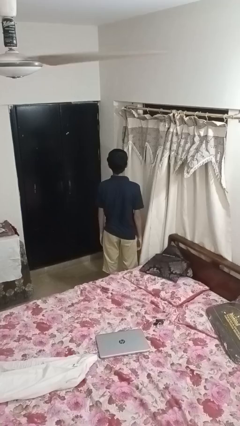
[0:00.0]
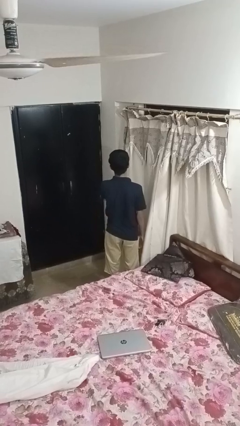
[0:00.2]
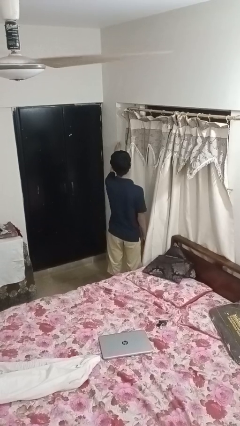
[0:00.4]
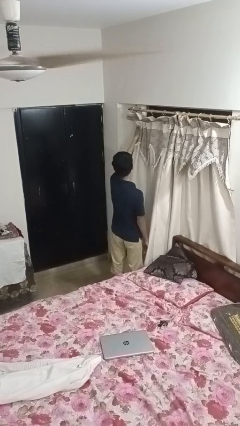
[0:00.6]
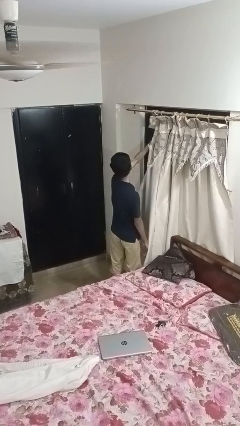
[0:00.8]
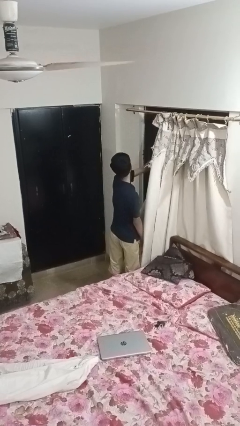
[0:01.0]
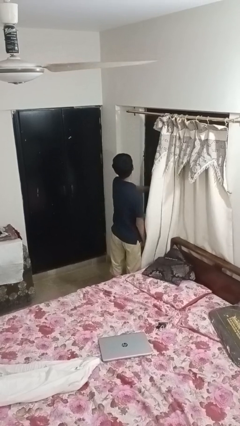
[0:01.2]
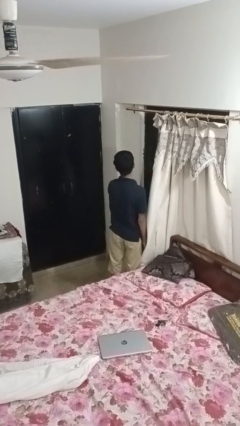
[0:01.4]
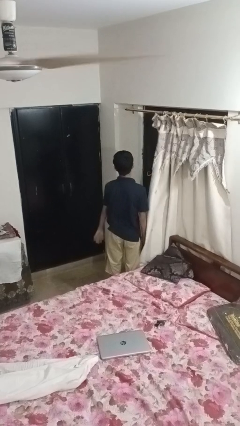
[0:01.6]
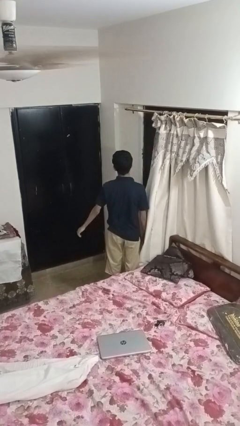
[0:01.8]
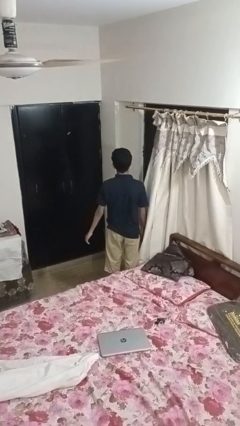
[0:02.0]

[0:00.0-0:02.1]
person opens curtains

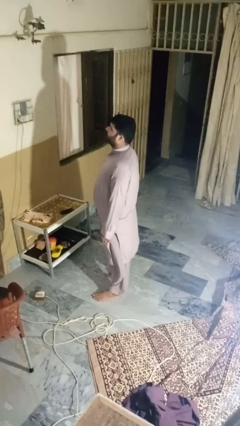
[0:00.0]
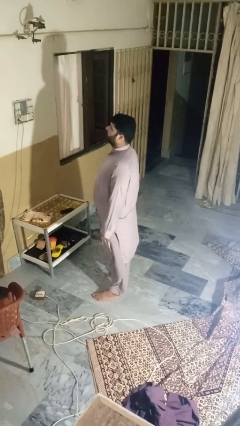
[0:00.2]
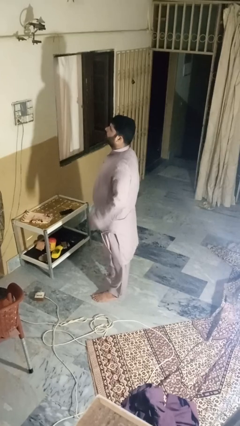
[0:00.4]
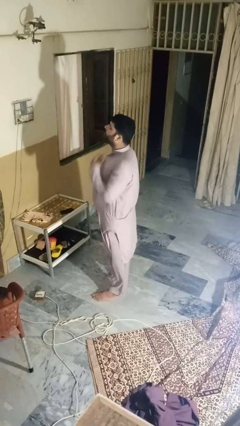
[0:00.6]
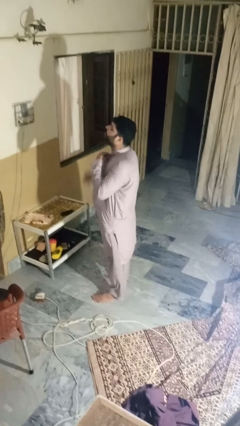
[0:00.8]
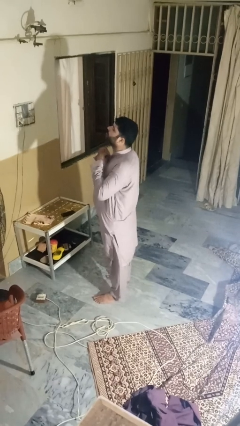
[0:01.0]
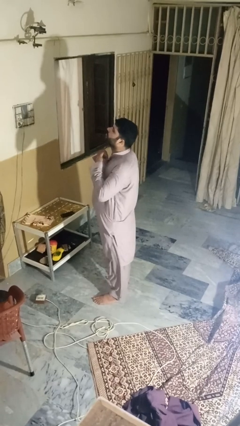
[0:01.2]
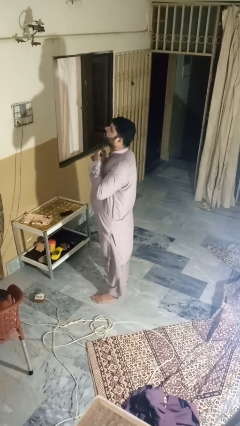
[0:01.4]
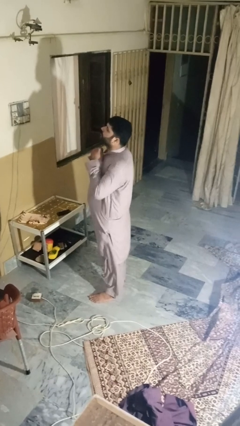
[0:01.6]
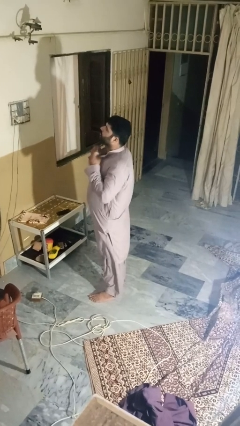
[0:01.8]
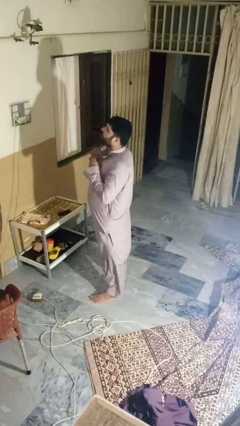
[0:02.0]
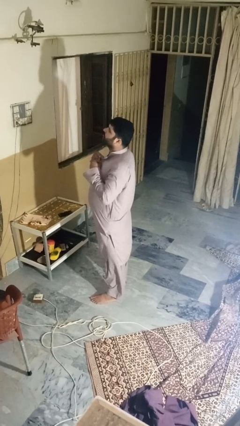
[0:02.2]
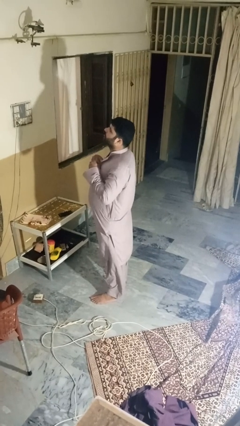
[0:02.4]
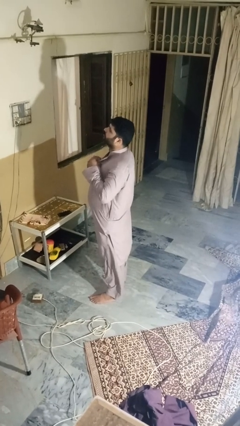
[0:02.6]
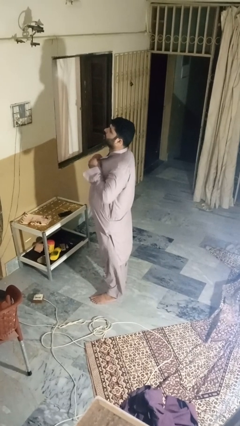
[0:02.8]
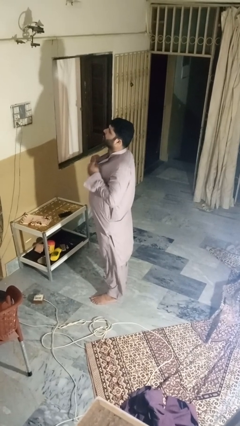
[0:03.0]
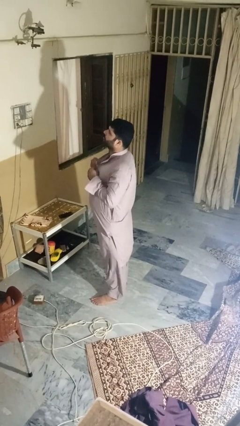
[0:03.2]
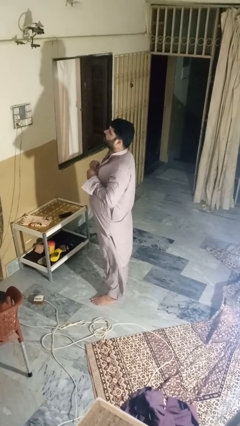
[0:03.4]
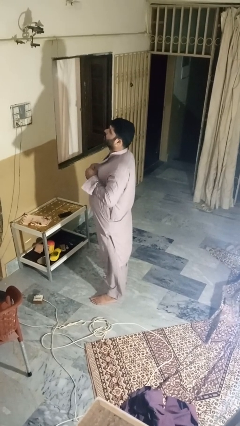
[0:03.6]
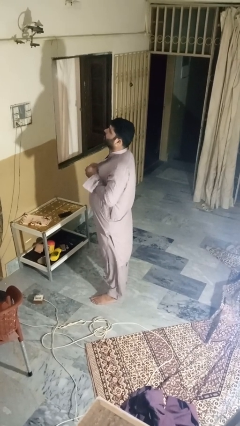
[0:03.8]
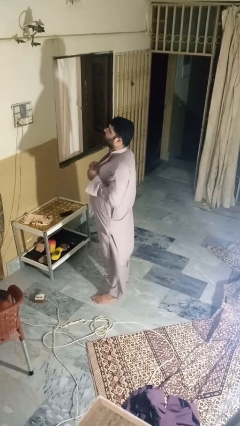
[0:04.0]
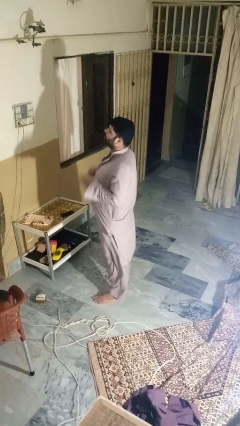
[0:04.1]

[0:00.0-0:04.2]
person unbuttons shirt

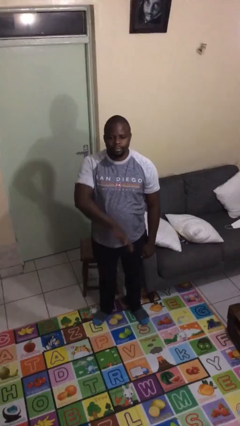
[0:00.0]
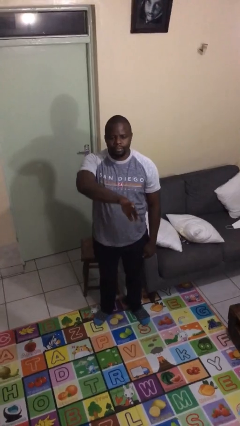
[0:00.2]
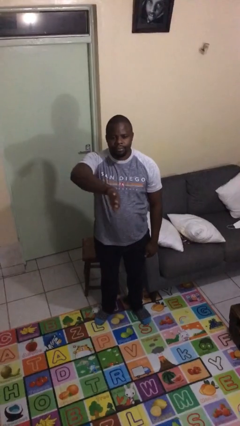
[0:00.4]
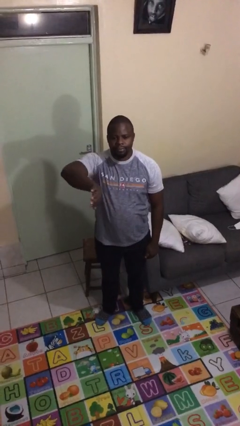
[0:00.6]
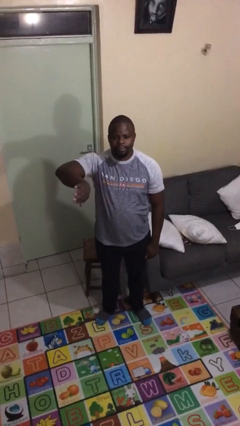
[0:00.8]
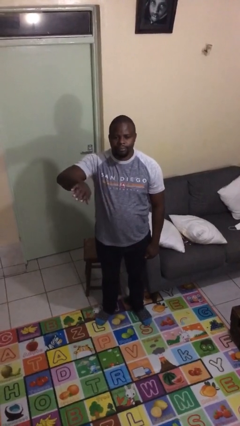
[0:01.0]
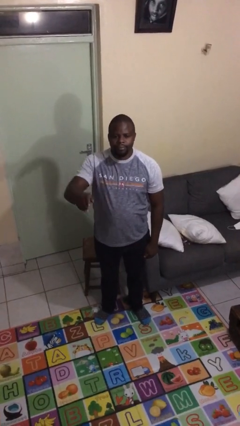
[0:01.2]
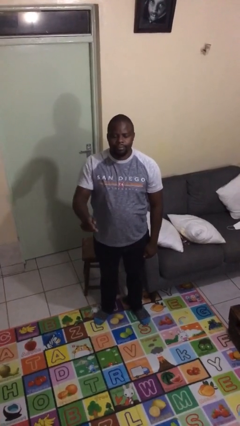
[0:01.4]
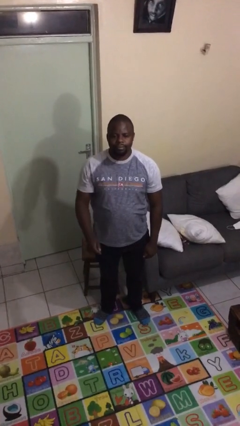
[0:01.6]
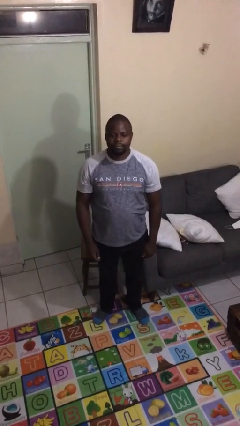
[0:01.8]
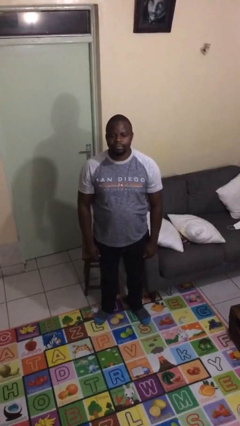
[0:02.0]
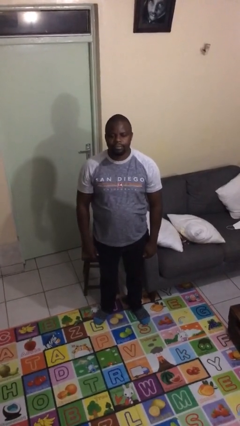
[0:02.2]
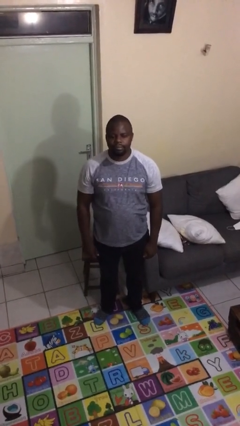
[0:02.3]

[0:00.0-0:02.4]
person gestures swipe right

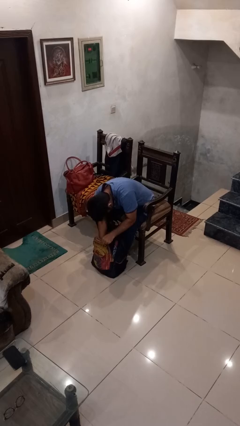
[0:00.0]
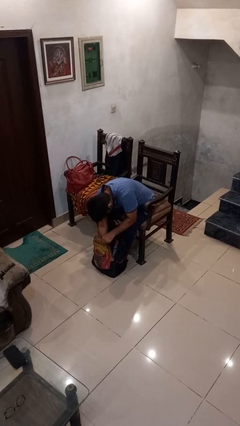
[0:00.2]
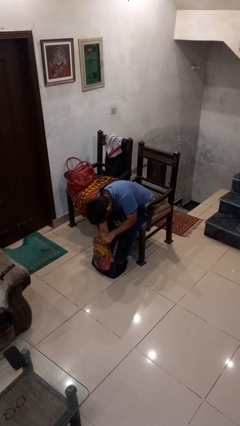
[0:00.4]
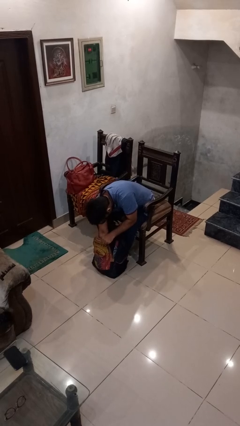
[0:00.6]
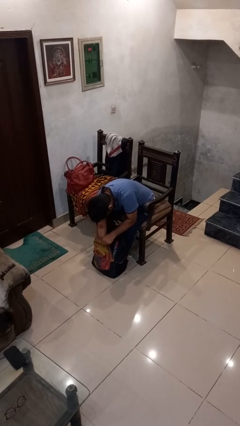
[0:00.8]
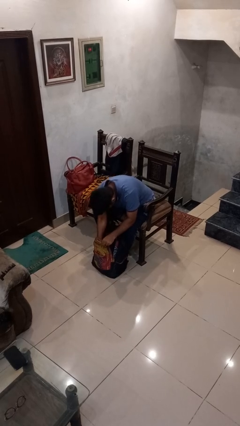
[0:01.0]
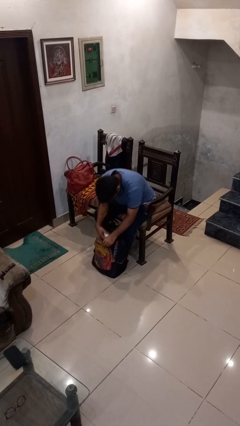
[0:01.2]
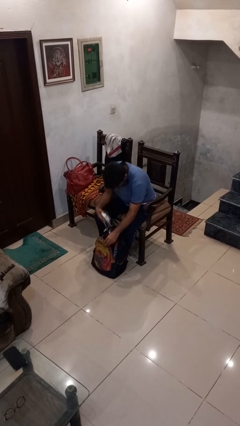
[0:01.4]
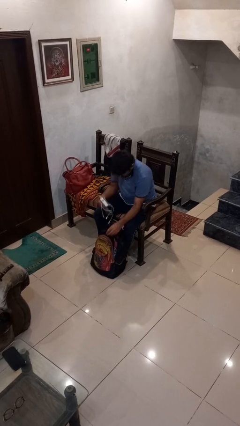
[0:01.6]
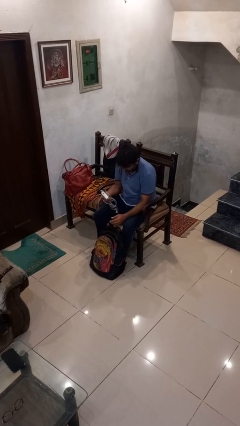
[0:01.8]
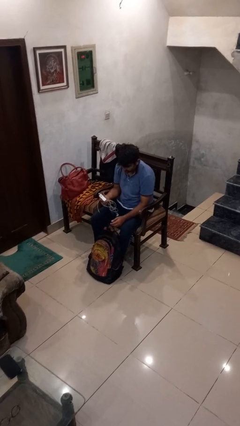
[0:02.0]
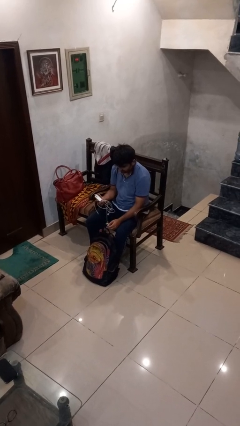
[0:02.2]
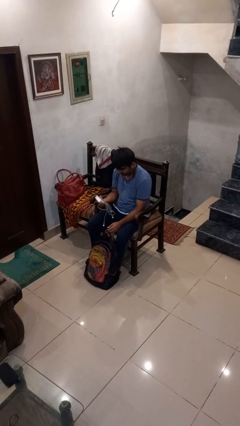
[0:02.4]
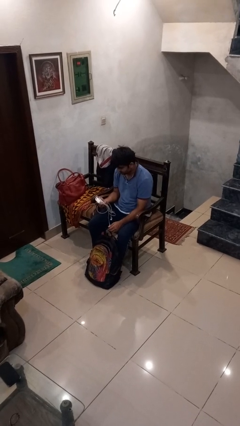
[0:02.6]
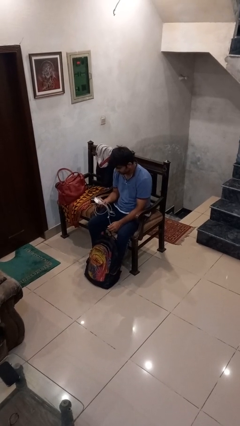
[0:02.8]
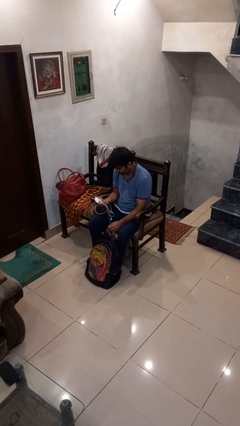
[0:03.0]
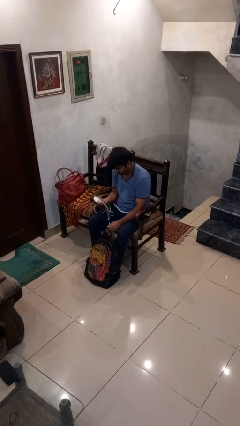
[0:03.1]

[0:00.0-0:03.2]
person takes object from backpack

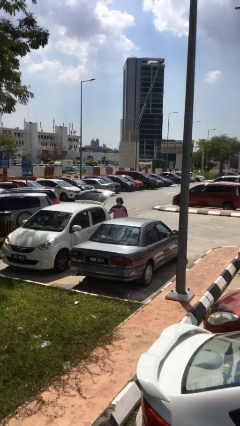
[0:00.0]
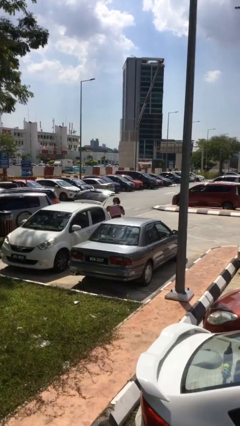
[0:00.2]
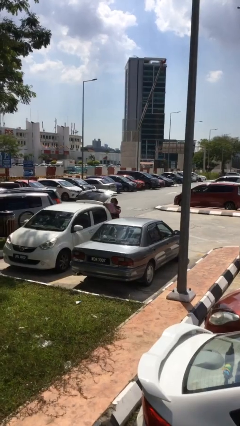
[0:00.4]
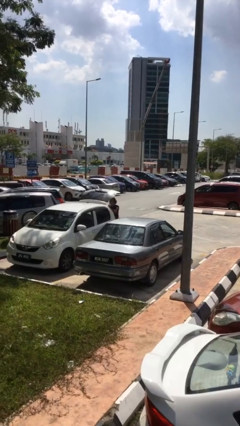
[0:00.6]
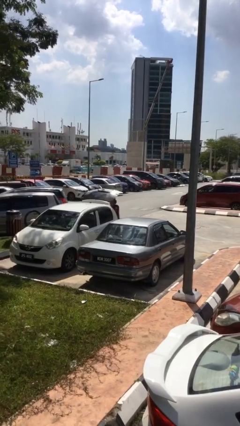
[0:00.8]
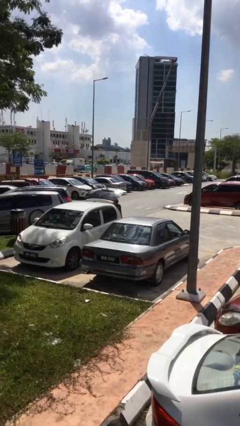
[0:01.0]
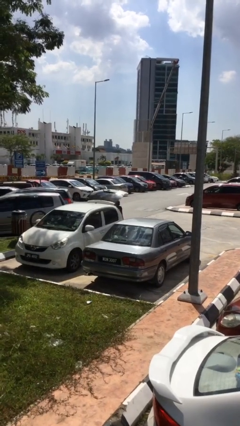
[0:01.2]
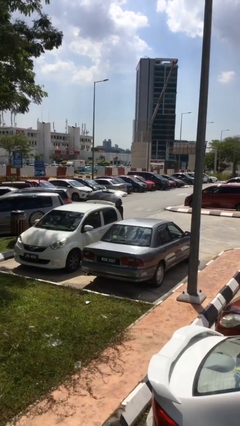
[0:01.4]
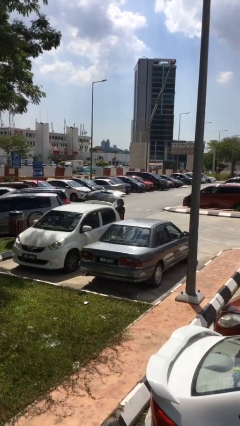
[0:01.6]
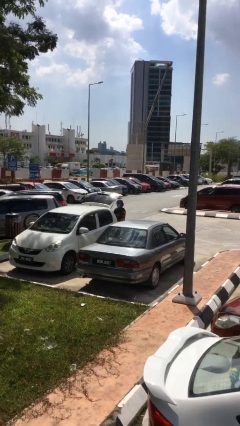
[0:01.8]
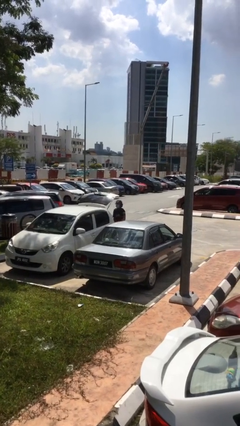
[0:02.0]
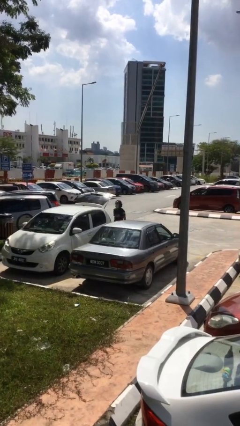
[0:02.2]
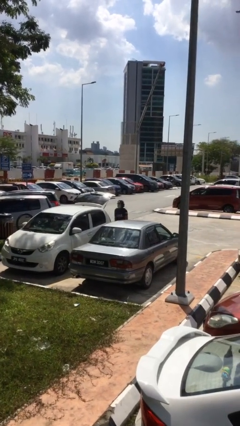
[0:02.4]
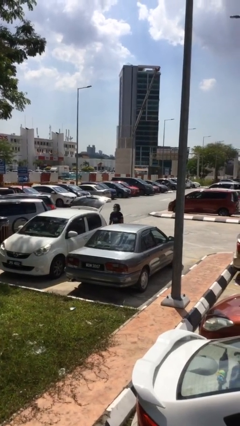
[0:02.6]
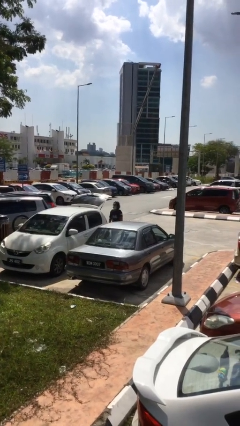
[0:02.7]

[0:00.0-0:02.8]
person loads car

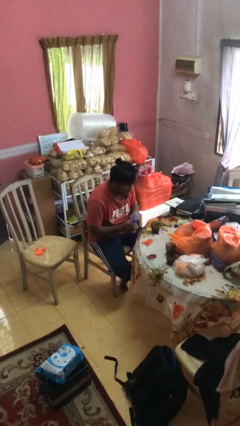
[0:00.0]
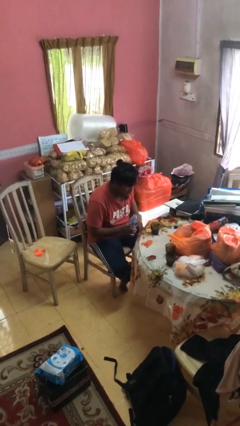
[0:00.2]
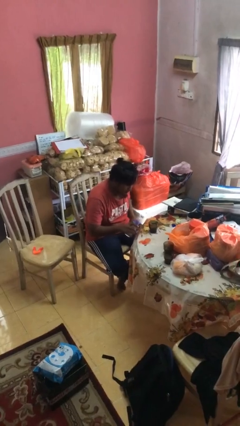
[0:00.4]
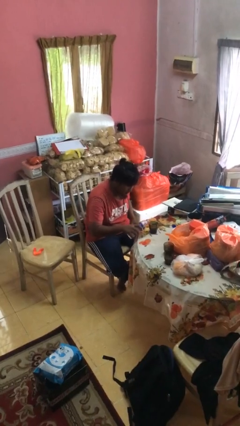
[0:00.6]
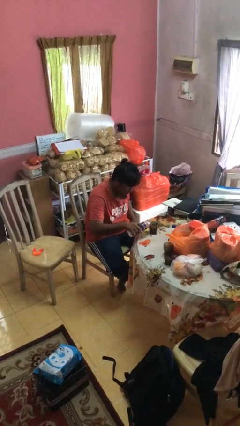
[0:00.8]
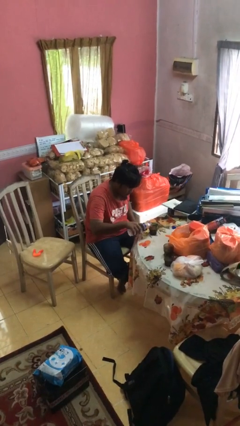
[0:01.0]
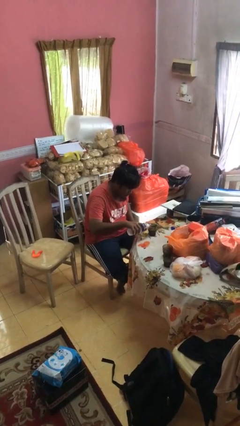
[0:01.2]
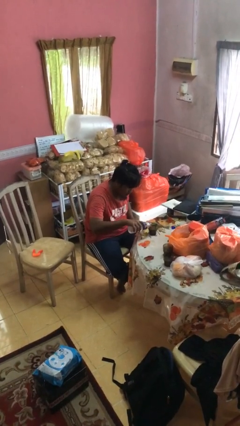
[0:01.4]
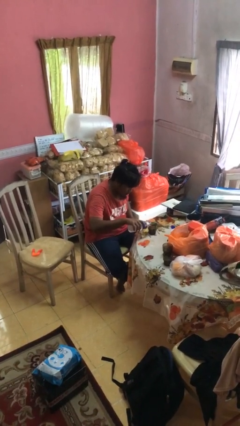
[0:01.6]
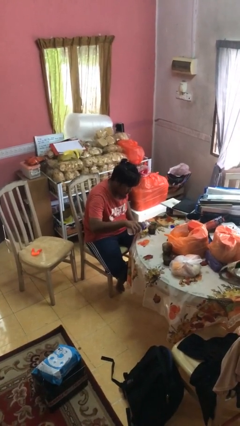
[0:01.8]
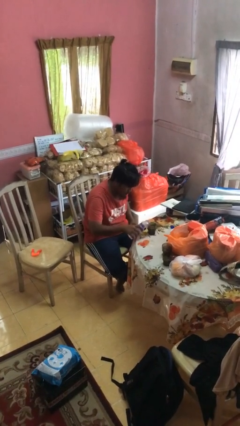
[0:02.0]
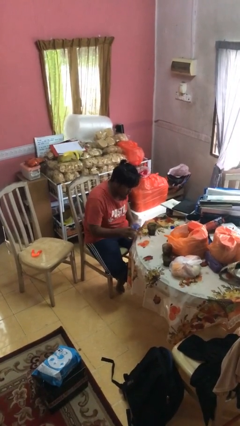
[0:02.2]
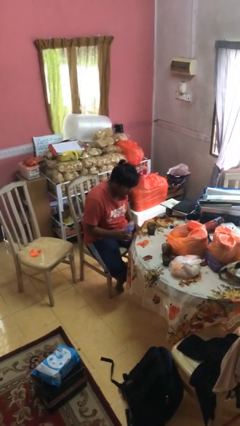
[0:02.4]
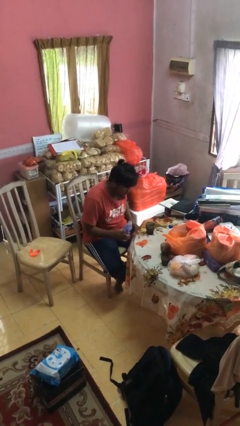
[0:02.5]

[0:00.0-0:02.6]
person pours liquid into cup

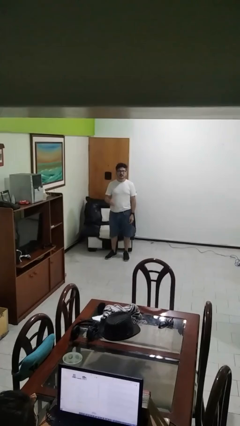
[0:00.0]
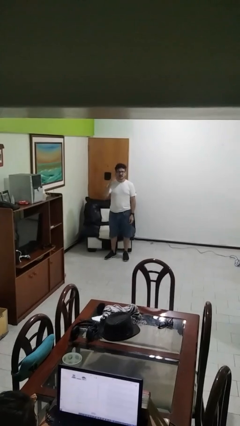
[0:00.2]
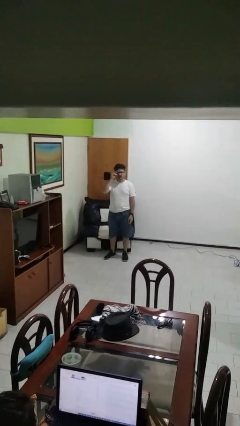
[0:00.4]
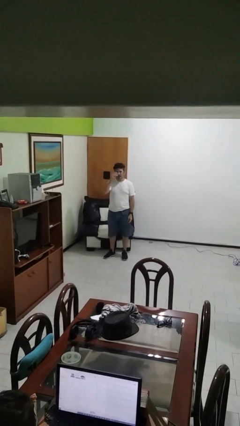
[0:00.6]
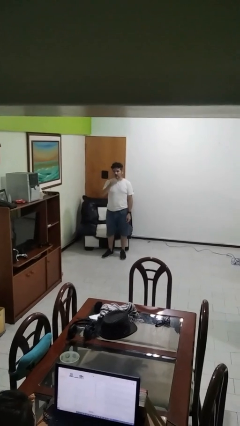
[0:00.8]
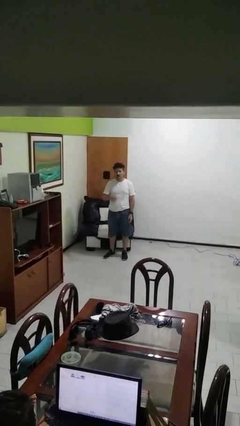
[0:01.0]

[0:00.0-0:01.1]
person takes off glasses
